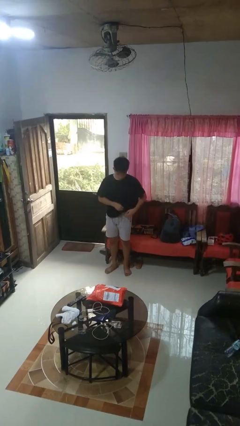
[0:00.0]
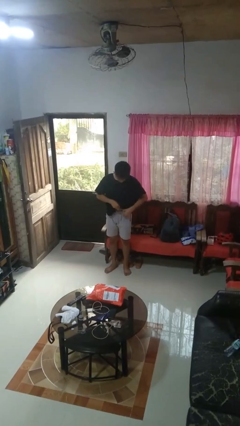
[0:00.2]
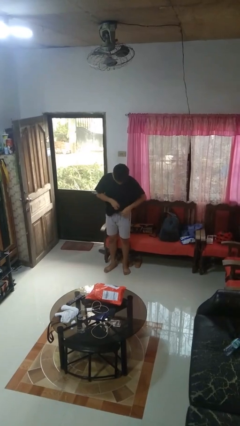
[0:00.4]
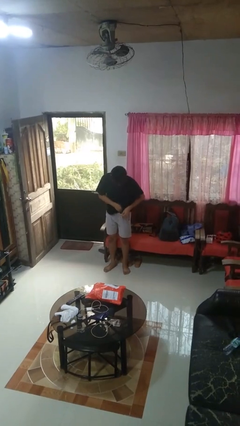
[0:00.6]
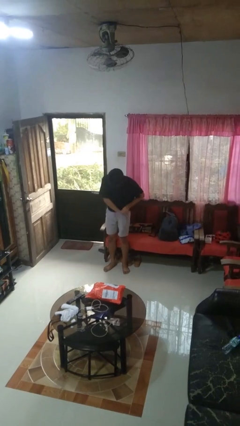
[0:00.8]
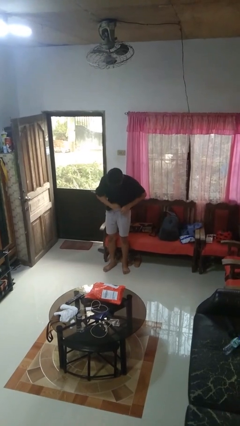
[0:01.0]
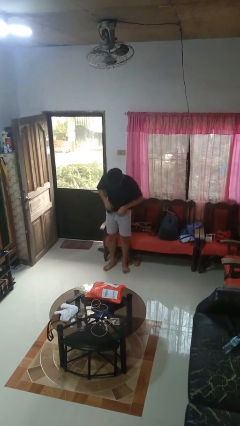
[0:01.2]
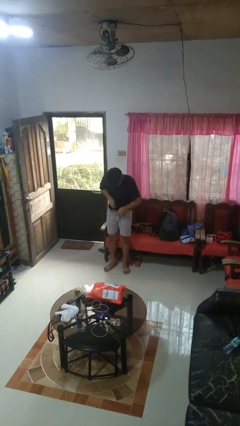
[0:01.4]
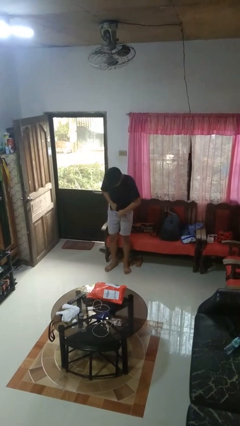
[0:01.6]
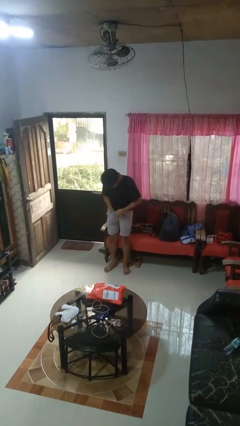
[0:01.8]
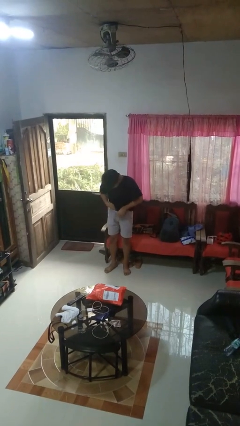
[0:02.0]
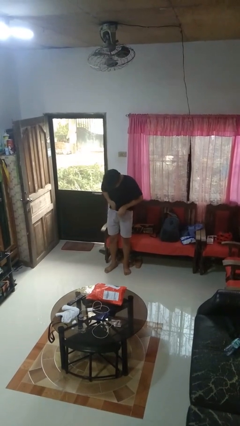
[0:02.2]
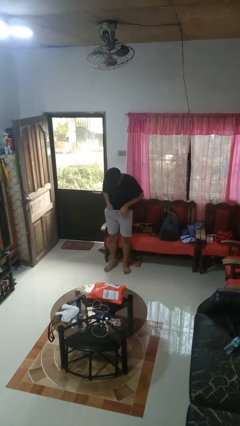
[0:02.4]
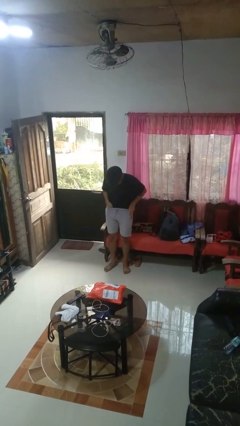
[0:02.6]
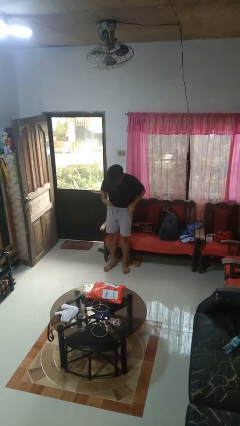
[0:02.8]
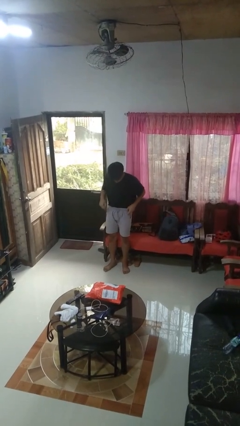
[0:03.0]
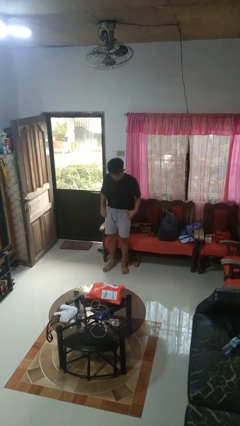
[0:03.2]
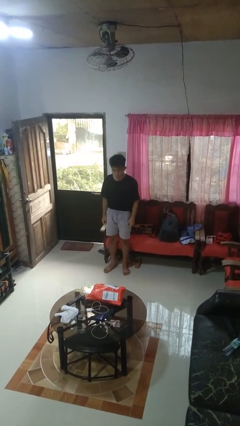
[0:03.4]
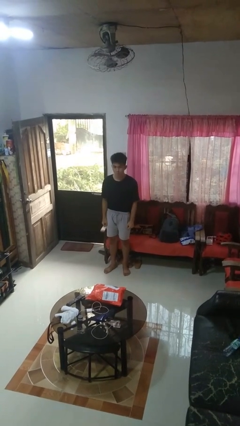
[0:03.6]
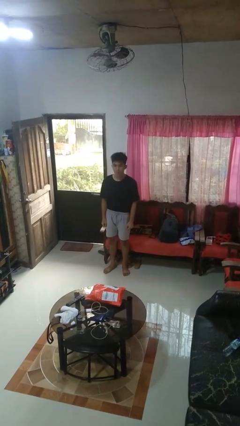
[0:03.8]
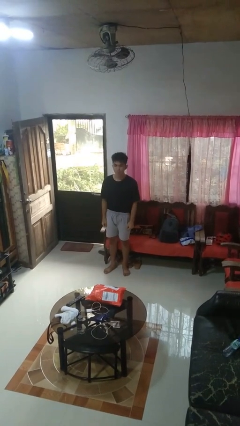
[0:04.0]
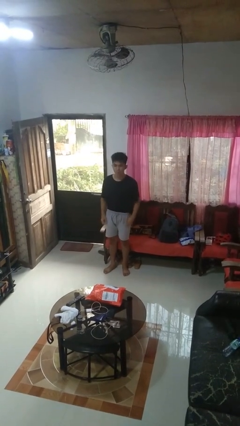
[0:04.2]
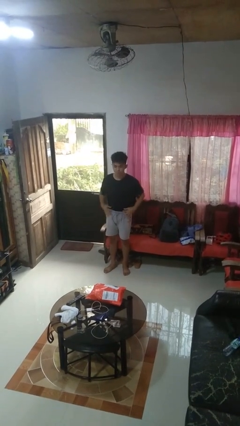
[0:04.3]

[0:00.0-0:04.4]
person tucks in shirt

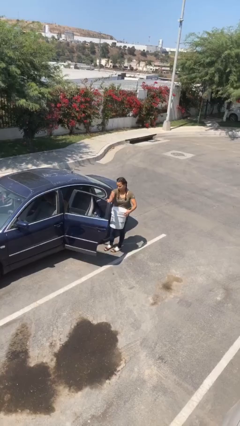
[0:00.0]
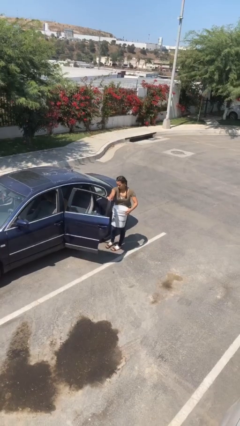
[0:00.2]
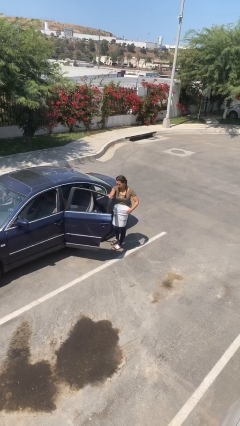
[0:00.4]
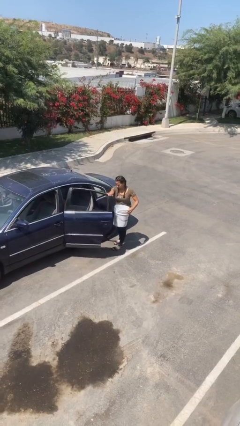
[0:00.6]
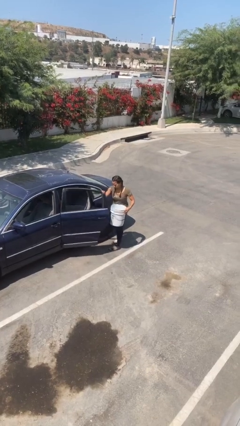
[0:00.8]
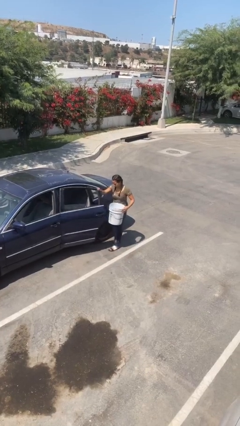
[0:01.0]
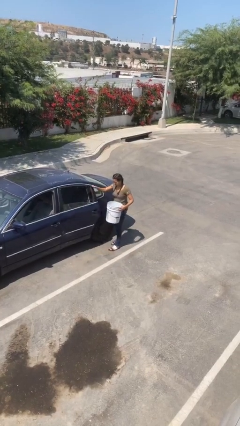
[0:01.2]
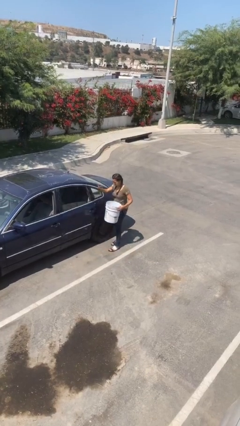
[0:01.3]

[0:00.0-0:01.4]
person closes car door

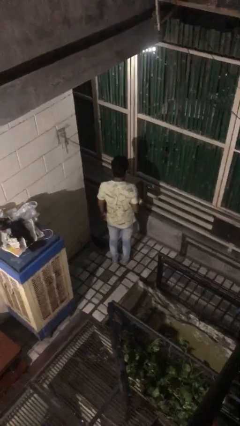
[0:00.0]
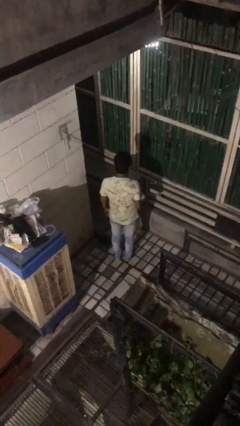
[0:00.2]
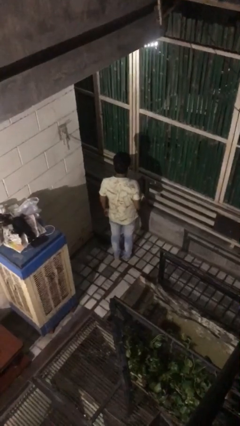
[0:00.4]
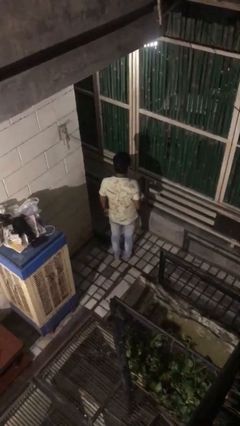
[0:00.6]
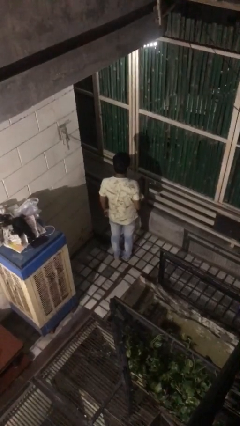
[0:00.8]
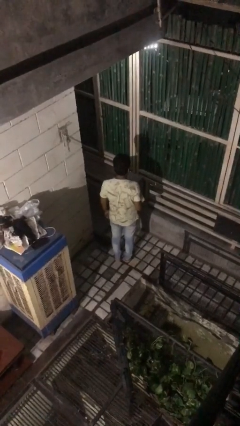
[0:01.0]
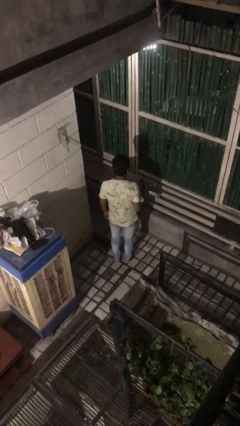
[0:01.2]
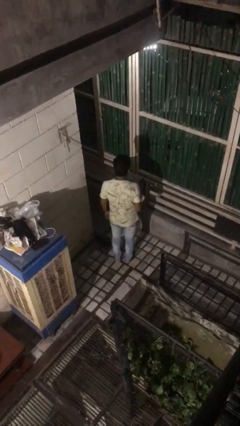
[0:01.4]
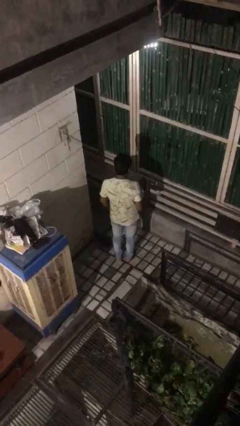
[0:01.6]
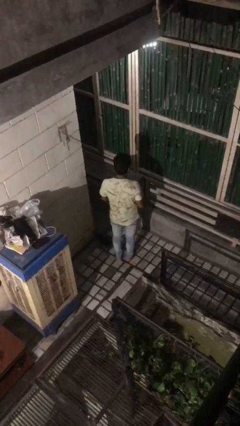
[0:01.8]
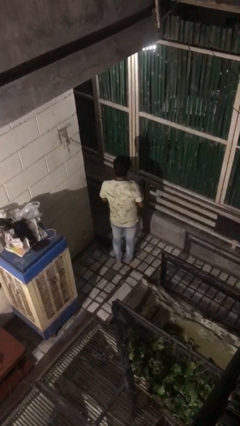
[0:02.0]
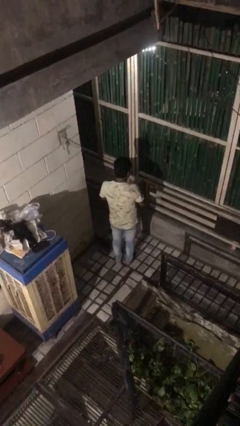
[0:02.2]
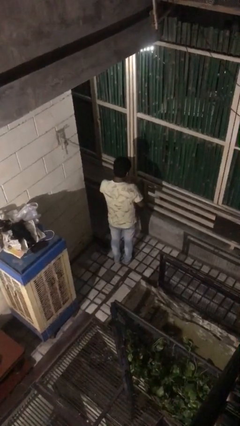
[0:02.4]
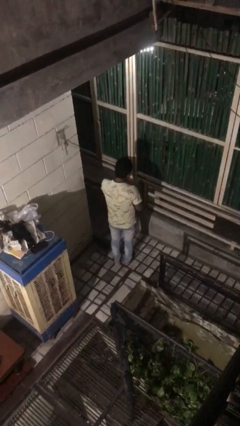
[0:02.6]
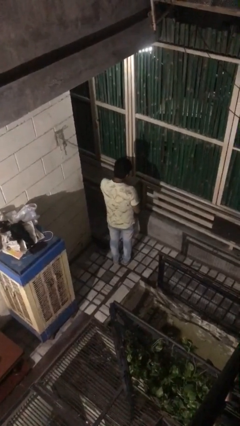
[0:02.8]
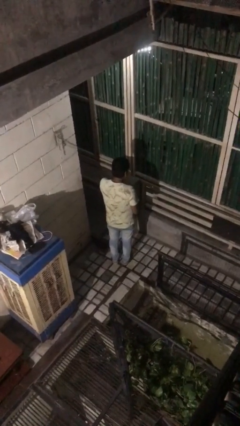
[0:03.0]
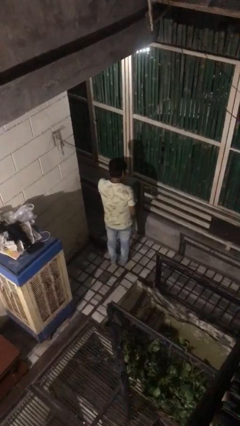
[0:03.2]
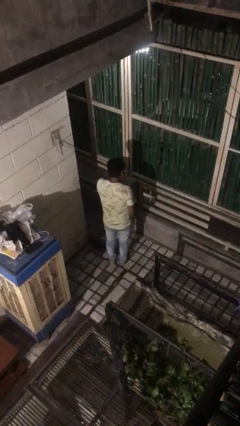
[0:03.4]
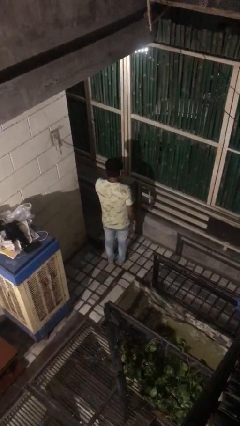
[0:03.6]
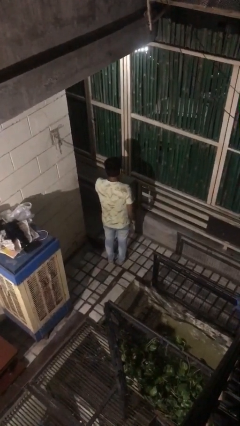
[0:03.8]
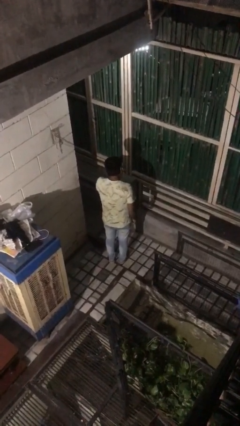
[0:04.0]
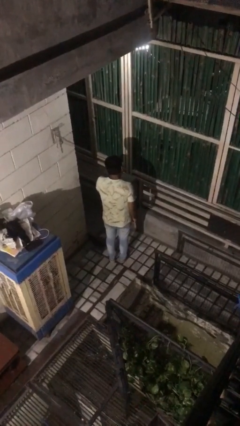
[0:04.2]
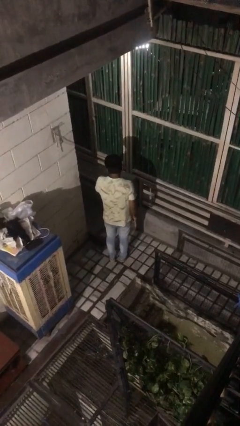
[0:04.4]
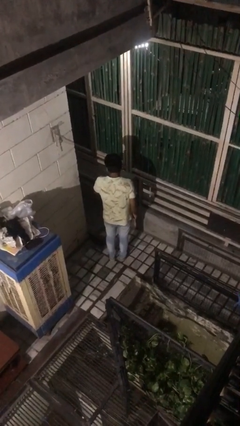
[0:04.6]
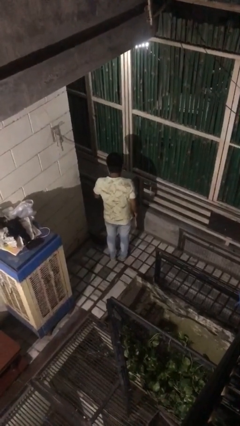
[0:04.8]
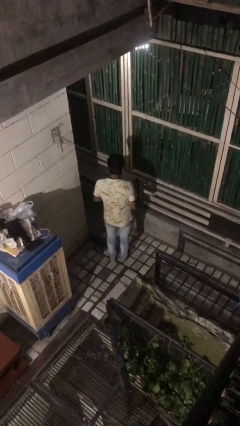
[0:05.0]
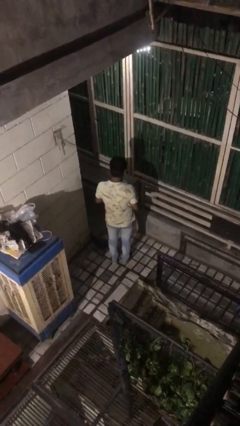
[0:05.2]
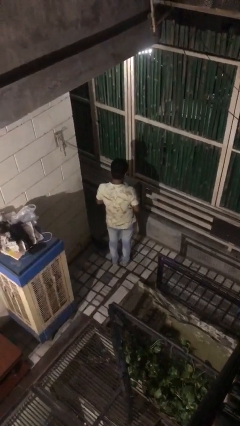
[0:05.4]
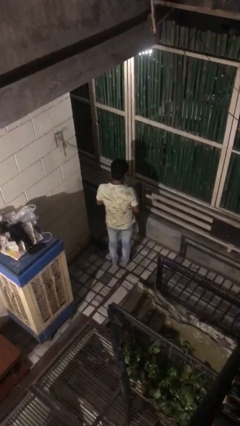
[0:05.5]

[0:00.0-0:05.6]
person blows nose

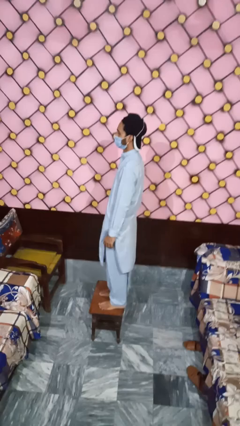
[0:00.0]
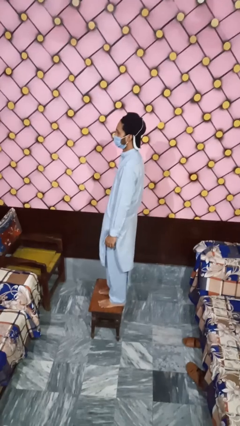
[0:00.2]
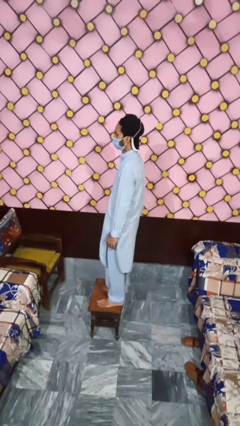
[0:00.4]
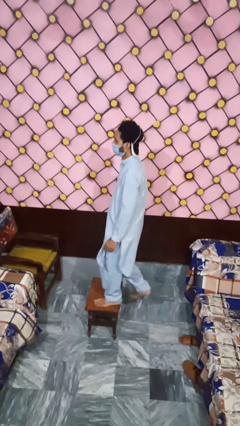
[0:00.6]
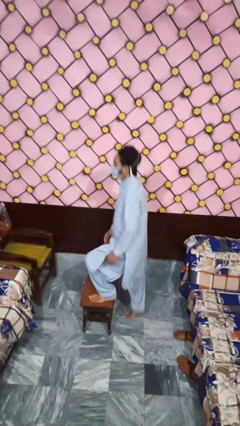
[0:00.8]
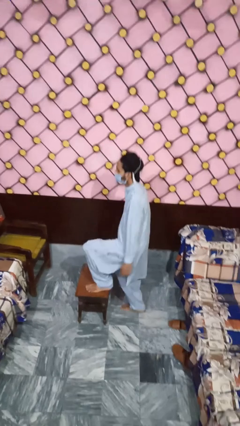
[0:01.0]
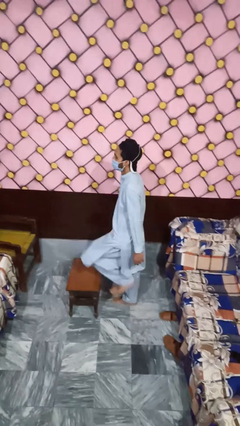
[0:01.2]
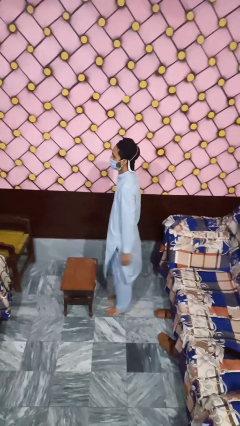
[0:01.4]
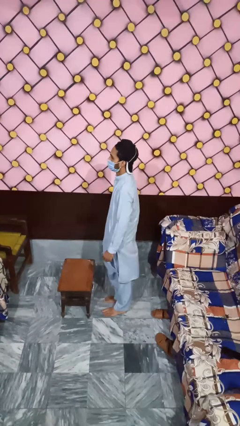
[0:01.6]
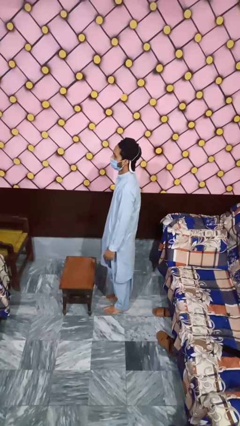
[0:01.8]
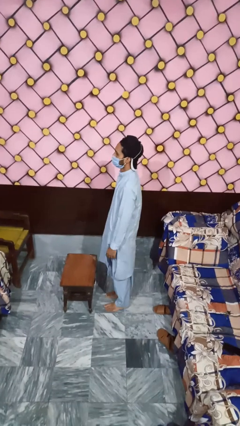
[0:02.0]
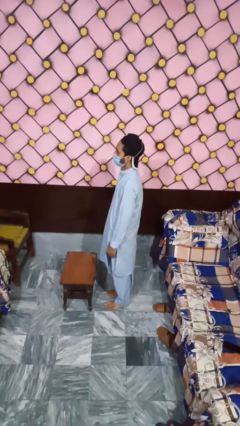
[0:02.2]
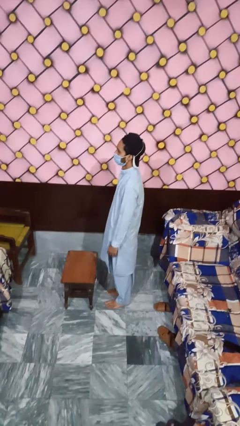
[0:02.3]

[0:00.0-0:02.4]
person climbs off table

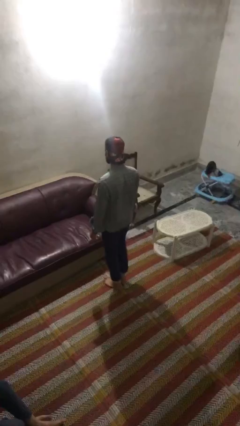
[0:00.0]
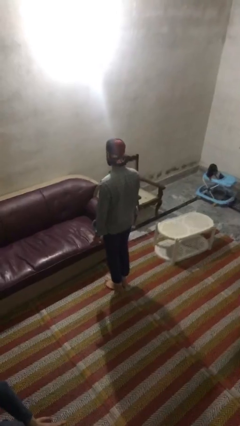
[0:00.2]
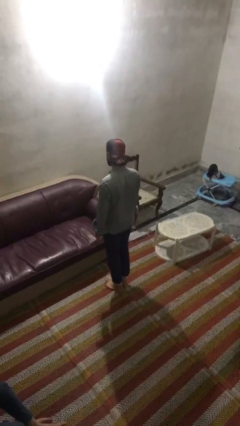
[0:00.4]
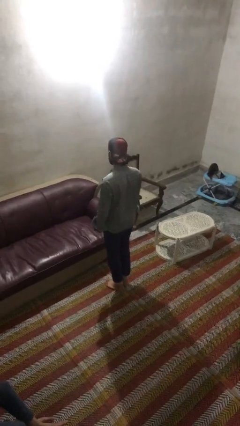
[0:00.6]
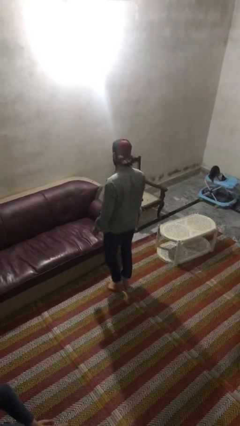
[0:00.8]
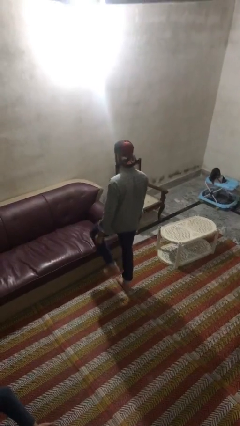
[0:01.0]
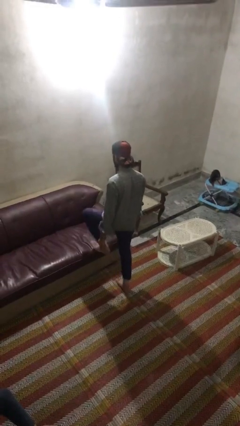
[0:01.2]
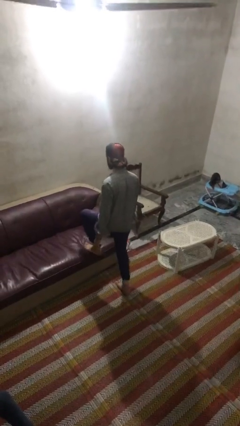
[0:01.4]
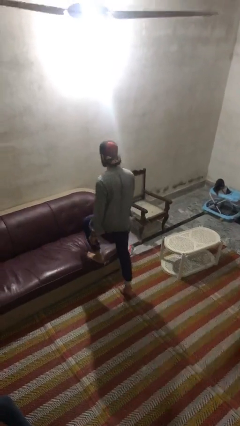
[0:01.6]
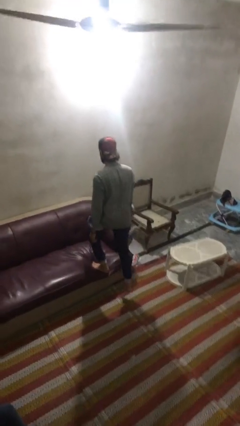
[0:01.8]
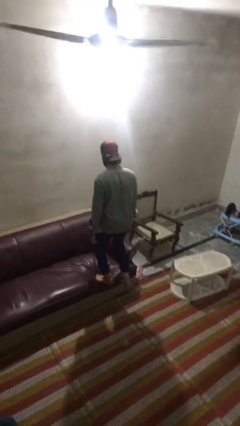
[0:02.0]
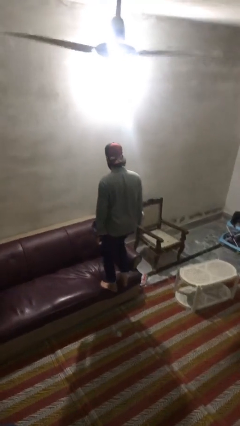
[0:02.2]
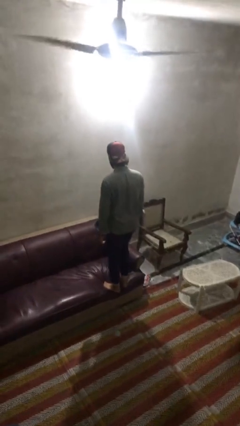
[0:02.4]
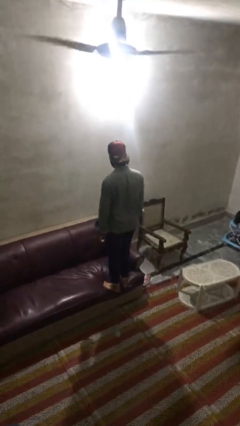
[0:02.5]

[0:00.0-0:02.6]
person climbs on couch

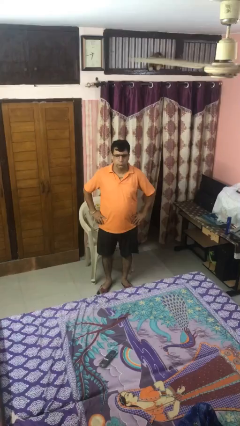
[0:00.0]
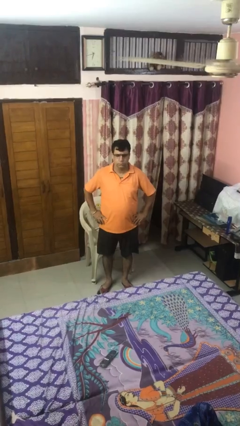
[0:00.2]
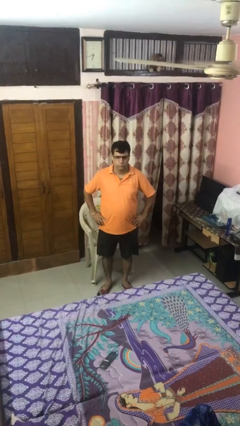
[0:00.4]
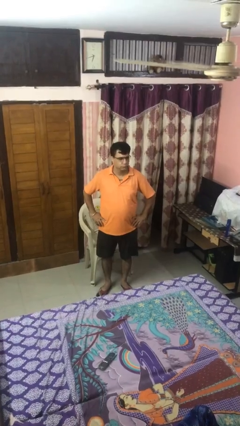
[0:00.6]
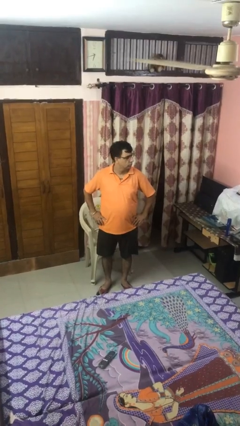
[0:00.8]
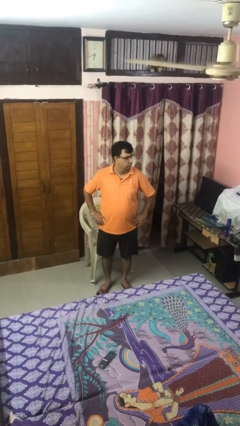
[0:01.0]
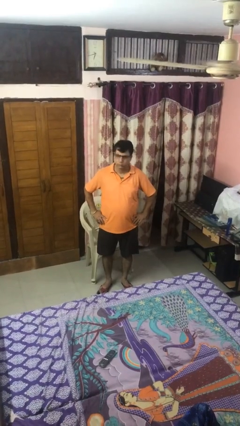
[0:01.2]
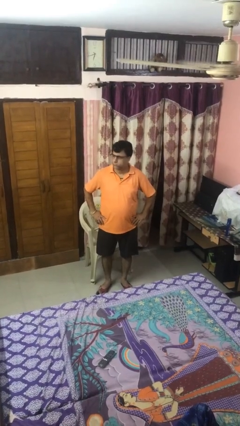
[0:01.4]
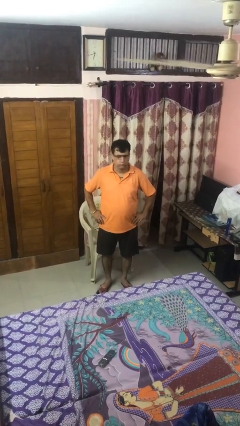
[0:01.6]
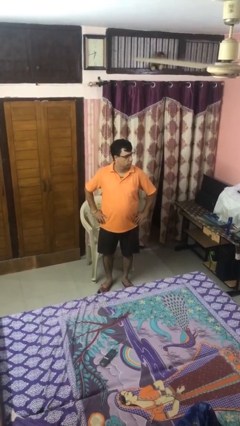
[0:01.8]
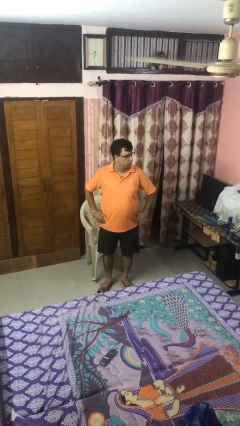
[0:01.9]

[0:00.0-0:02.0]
person shakes head
